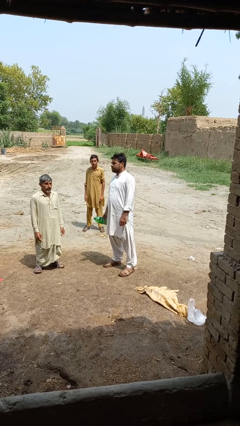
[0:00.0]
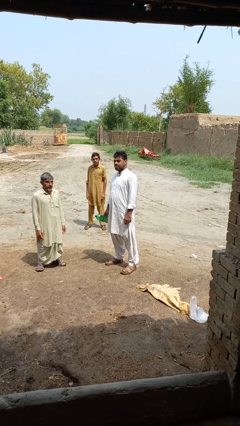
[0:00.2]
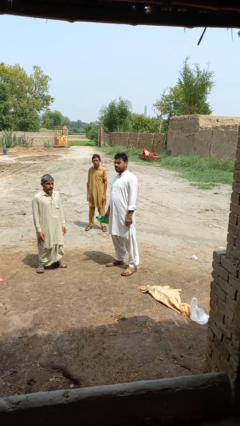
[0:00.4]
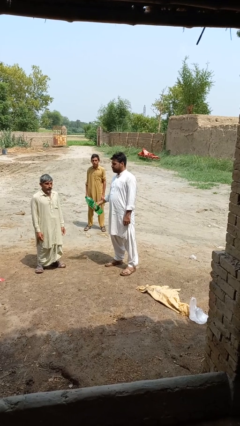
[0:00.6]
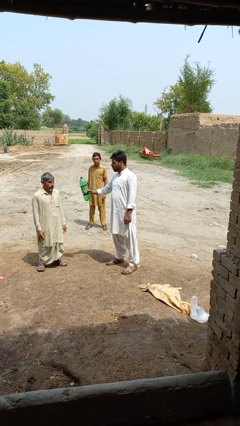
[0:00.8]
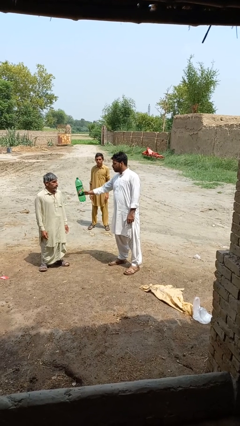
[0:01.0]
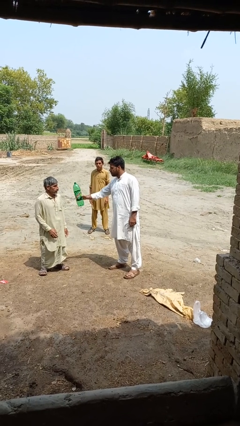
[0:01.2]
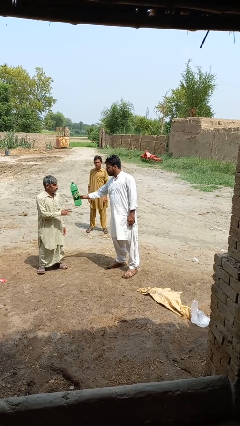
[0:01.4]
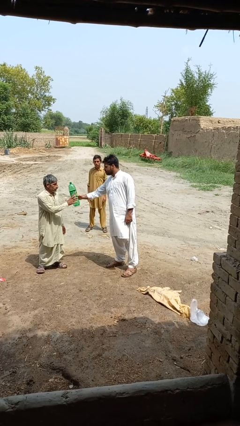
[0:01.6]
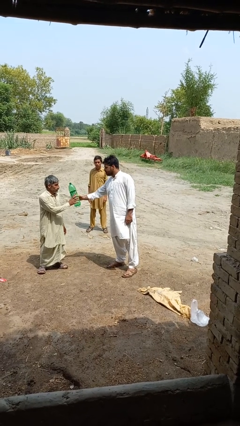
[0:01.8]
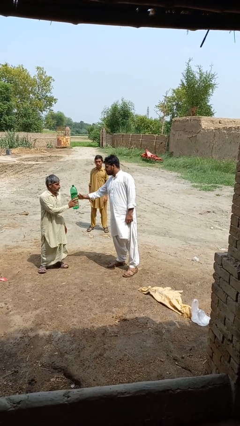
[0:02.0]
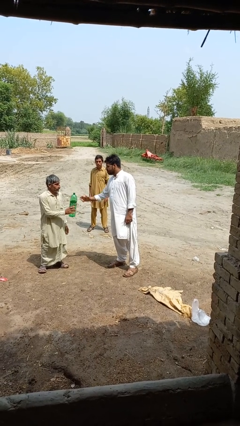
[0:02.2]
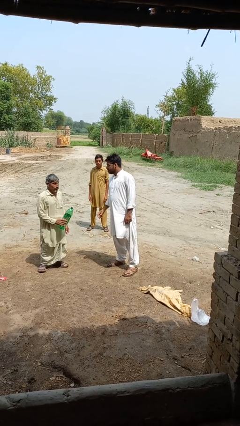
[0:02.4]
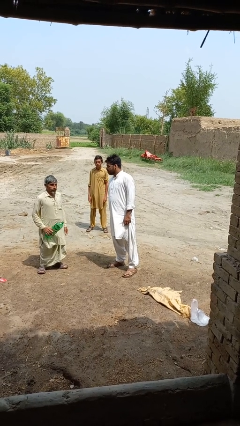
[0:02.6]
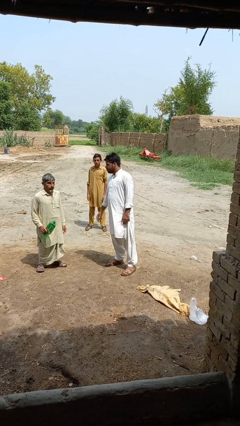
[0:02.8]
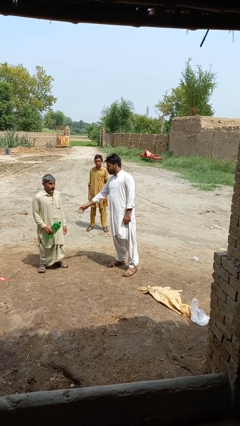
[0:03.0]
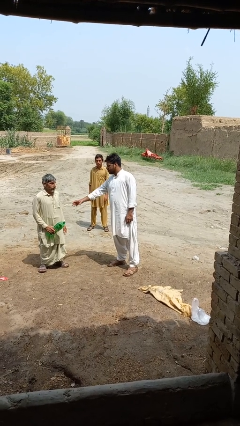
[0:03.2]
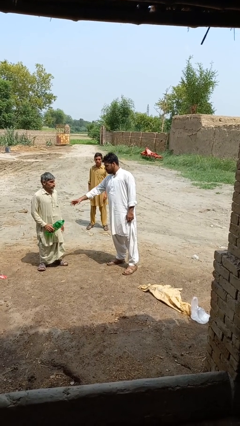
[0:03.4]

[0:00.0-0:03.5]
person transfers object to person

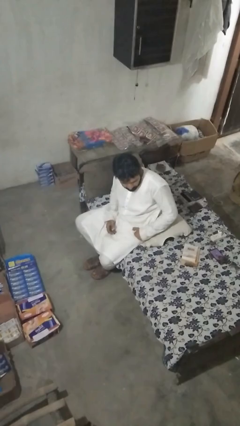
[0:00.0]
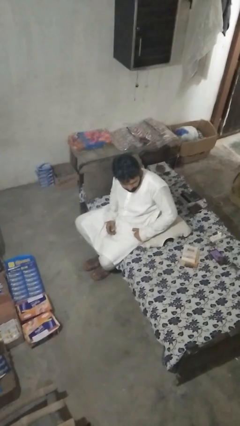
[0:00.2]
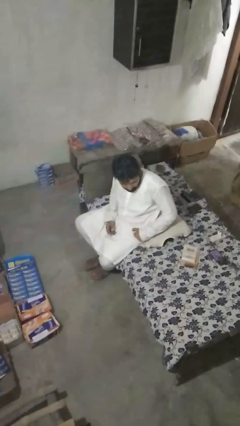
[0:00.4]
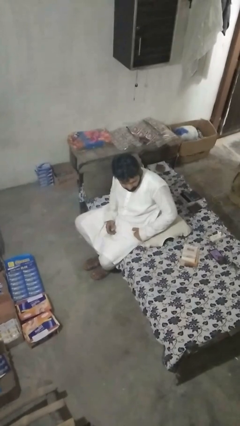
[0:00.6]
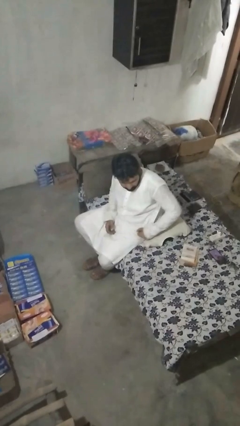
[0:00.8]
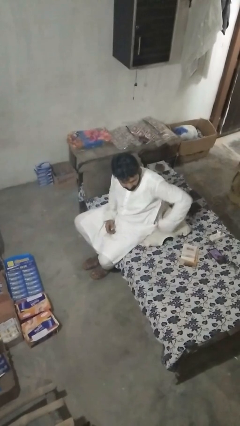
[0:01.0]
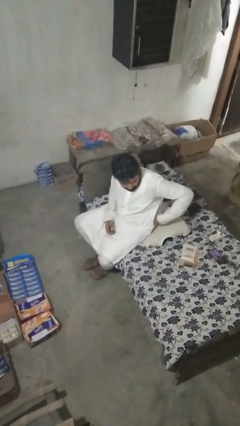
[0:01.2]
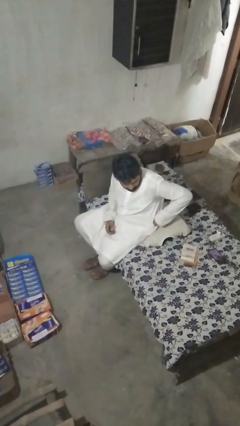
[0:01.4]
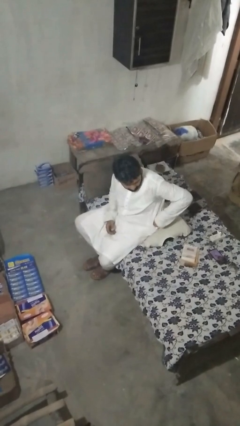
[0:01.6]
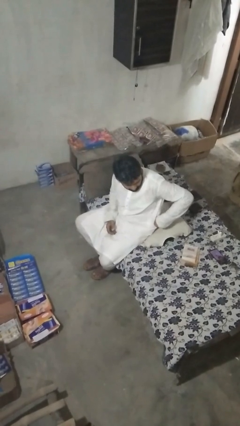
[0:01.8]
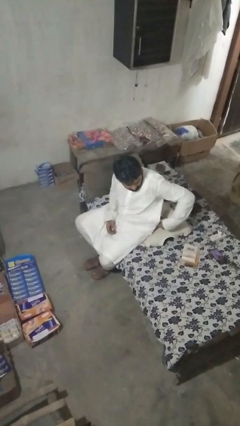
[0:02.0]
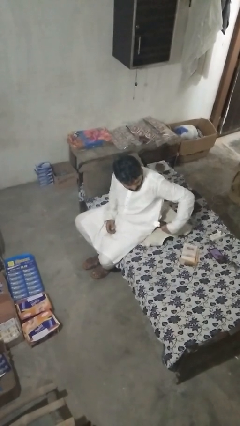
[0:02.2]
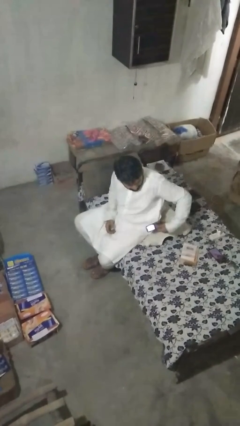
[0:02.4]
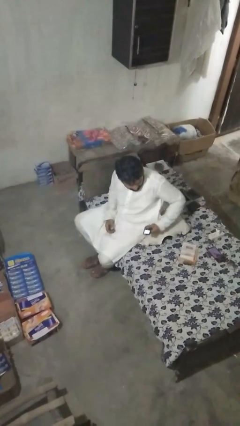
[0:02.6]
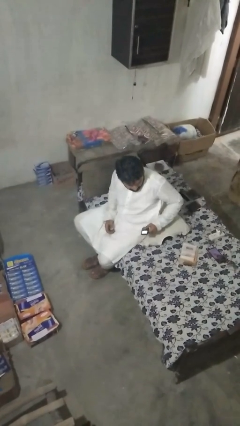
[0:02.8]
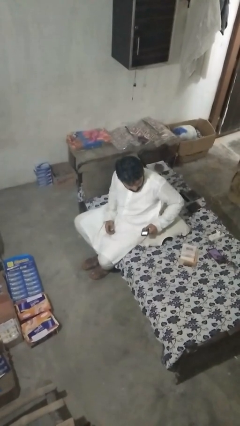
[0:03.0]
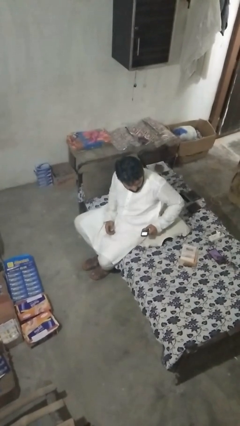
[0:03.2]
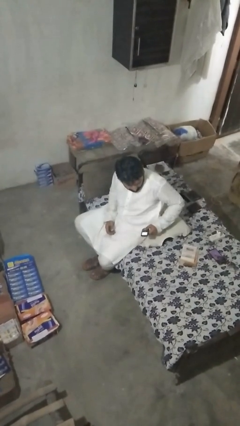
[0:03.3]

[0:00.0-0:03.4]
person takes phone from pocket

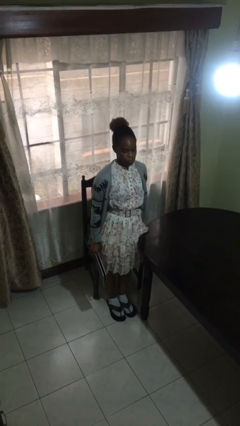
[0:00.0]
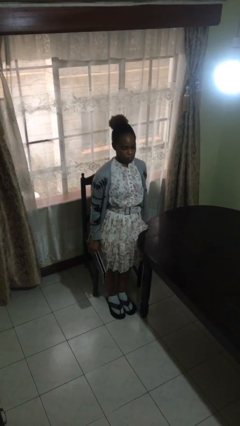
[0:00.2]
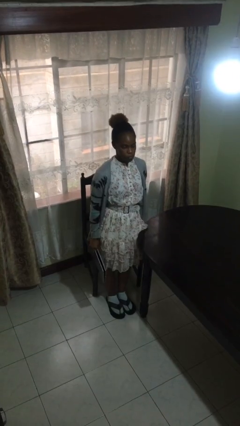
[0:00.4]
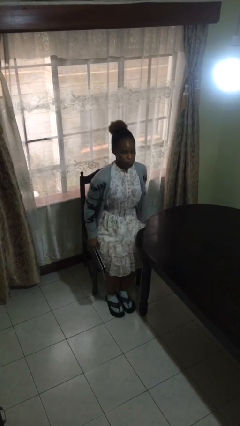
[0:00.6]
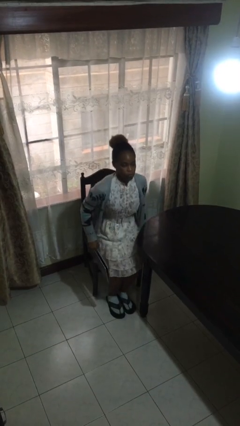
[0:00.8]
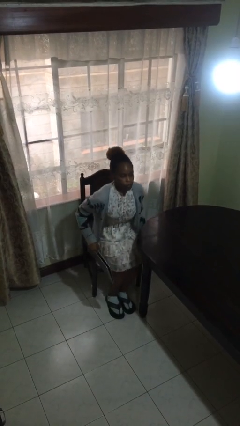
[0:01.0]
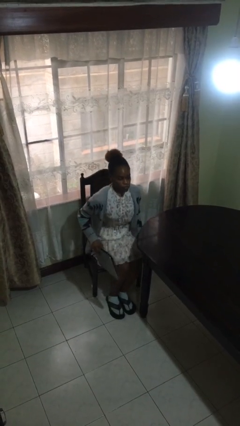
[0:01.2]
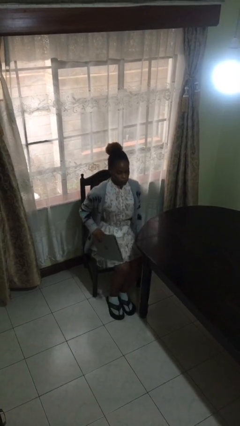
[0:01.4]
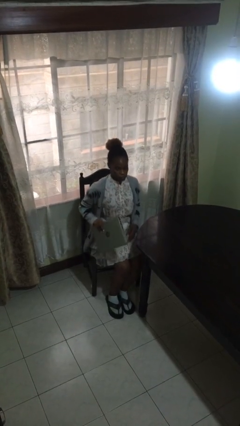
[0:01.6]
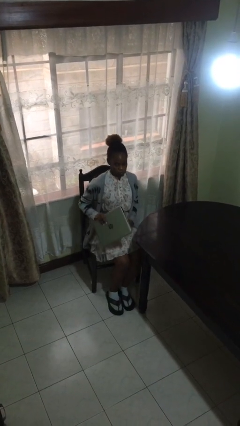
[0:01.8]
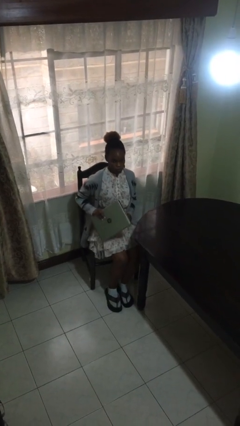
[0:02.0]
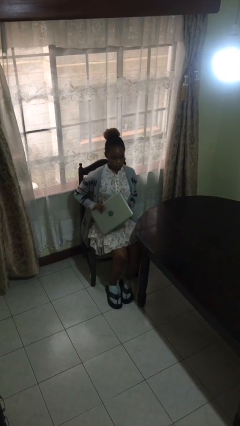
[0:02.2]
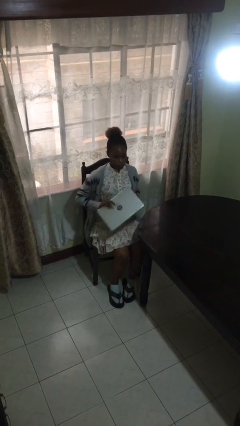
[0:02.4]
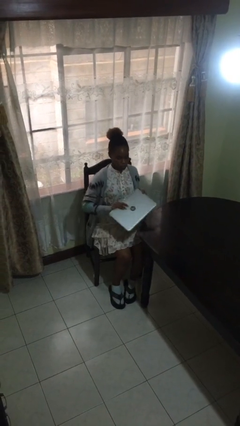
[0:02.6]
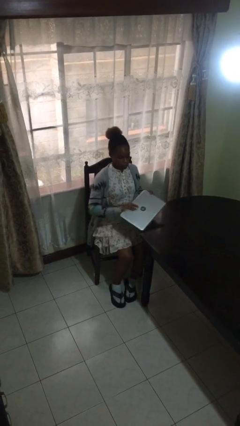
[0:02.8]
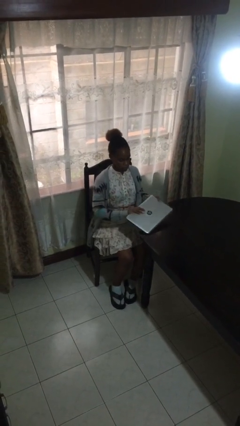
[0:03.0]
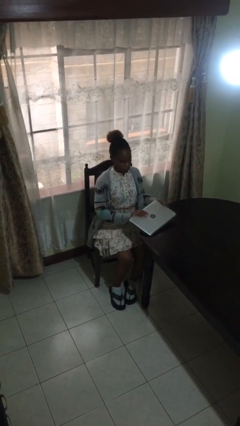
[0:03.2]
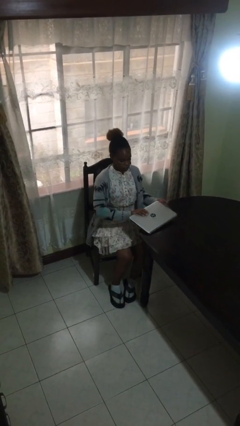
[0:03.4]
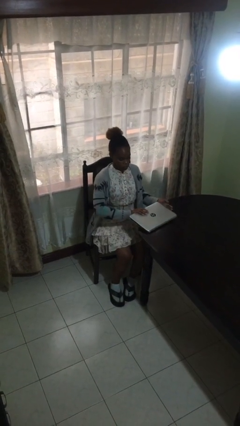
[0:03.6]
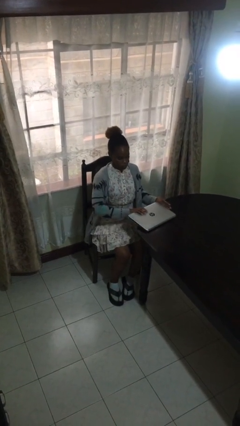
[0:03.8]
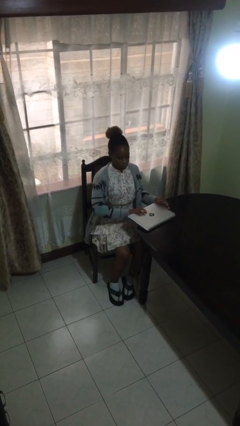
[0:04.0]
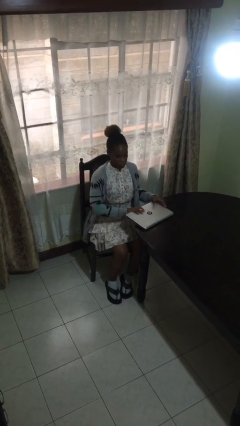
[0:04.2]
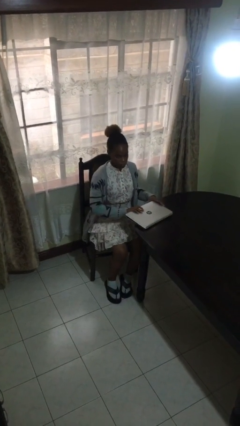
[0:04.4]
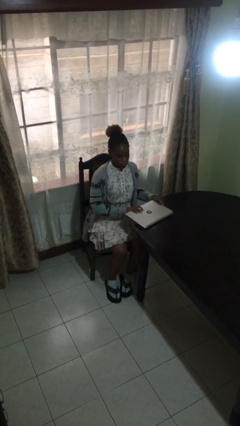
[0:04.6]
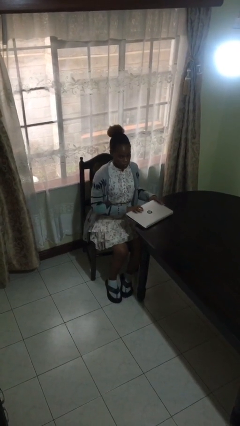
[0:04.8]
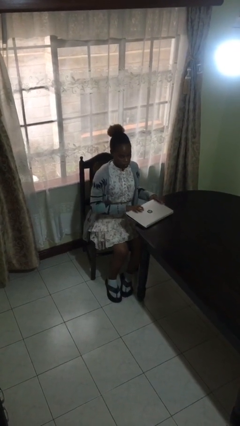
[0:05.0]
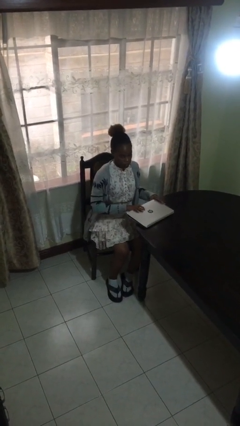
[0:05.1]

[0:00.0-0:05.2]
person sits down

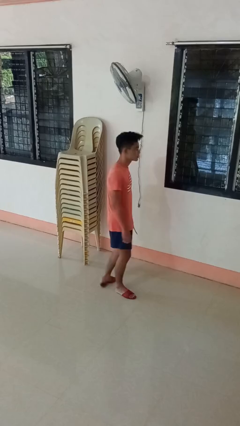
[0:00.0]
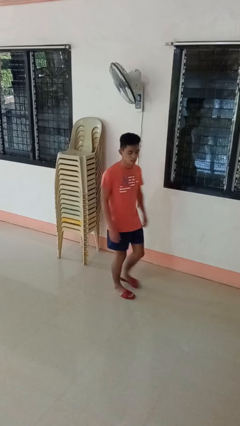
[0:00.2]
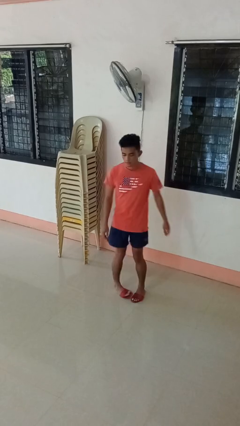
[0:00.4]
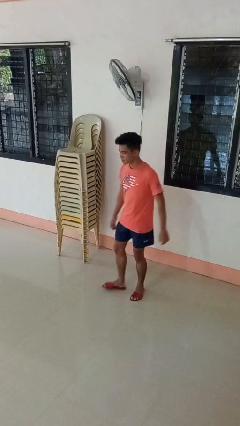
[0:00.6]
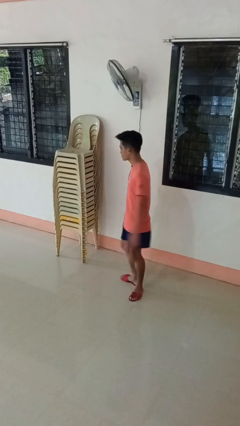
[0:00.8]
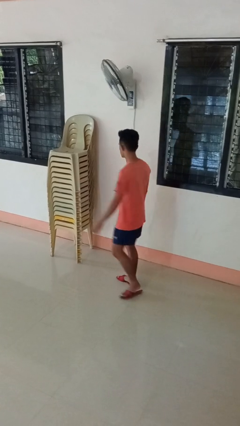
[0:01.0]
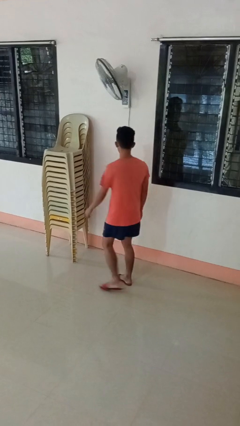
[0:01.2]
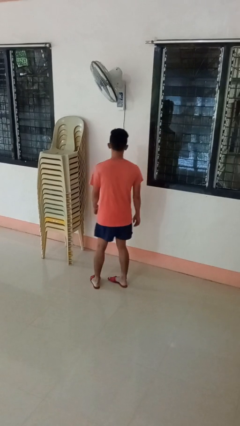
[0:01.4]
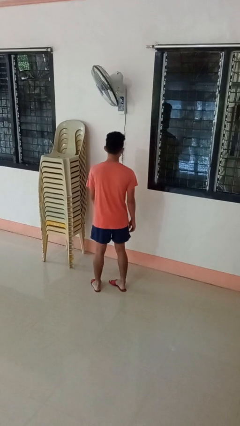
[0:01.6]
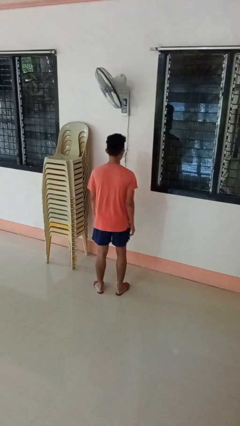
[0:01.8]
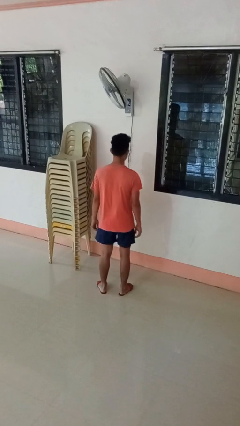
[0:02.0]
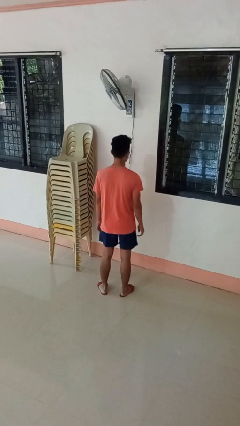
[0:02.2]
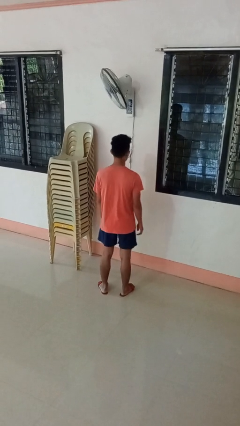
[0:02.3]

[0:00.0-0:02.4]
person twirls

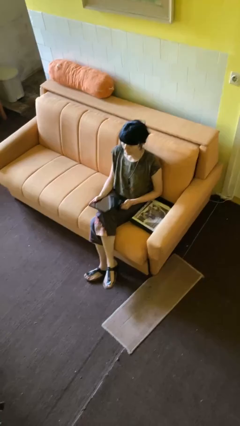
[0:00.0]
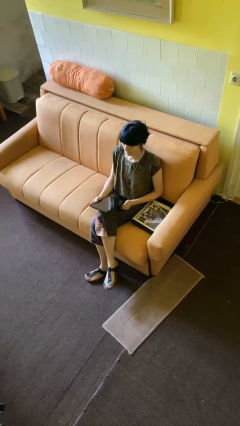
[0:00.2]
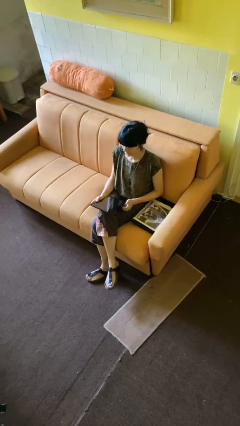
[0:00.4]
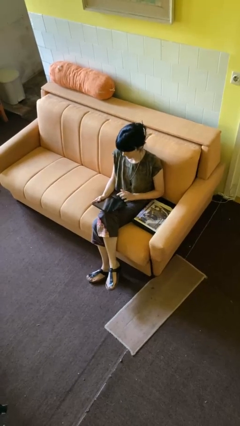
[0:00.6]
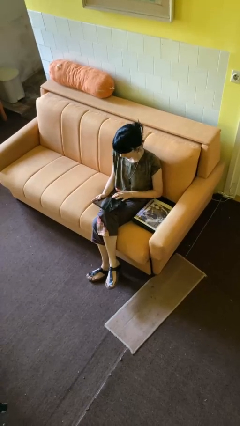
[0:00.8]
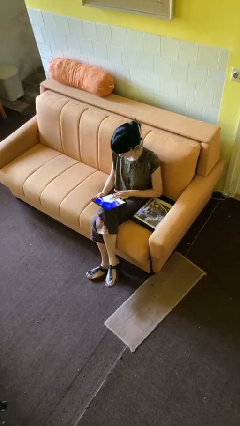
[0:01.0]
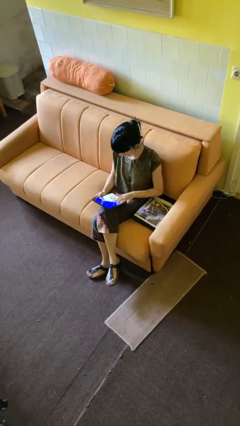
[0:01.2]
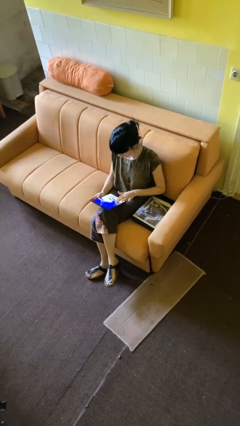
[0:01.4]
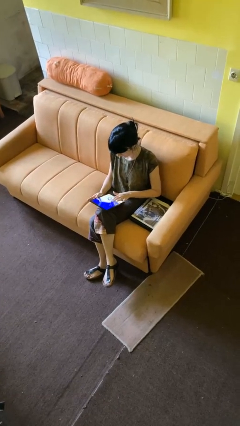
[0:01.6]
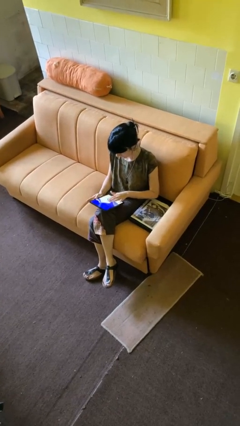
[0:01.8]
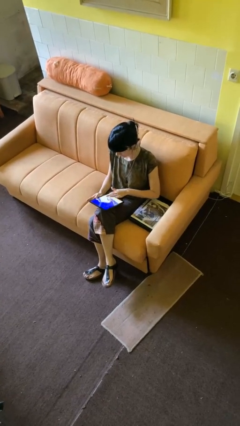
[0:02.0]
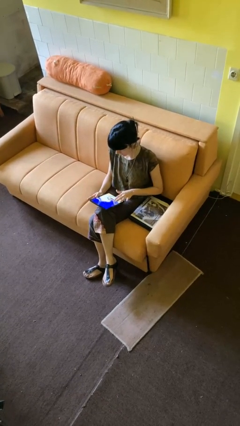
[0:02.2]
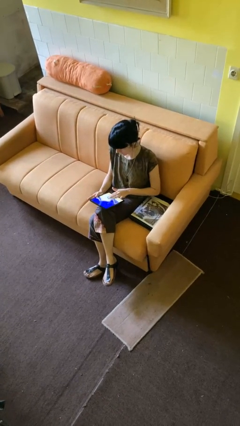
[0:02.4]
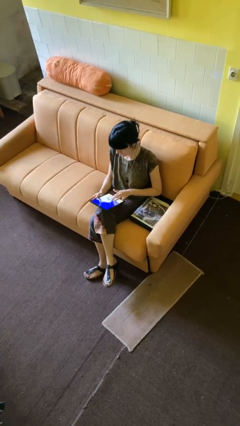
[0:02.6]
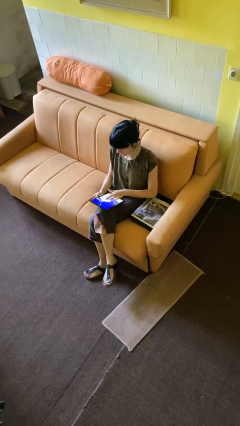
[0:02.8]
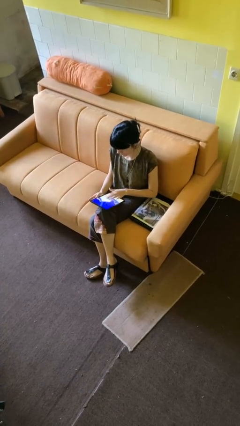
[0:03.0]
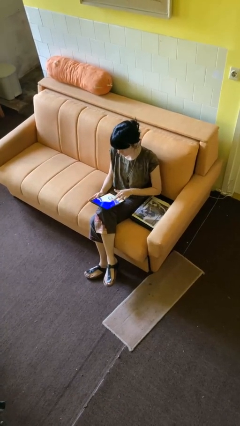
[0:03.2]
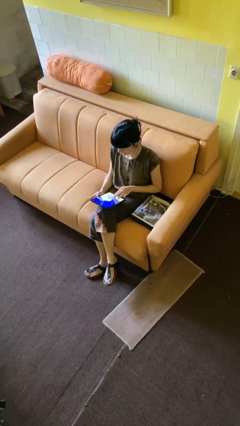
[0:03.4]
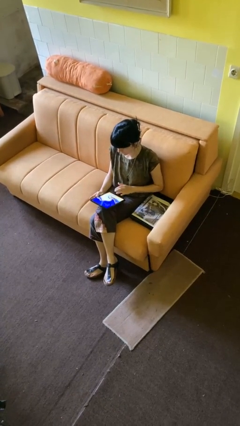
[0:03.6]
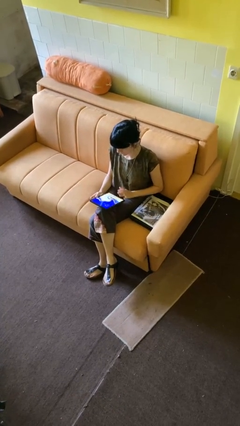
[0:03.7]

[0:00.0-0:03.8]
person interacts with tablet
